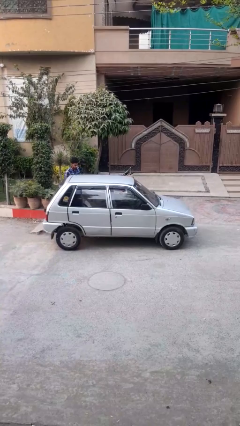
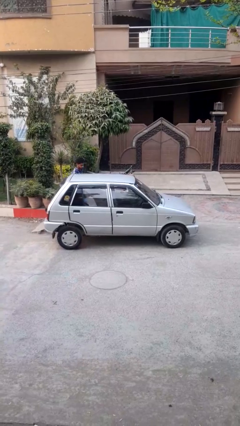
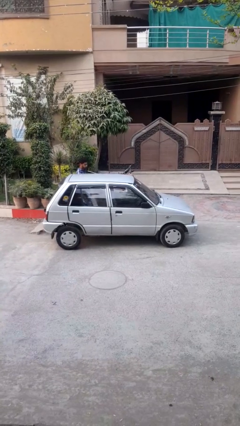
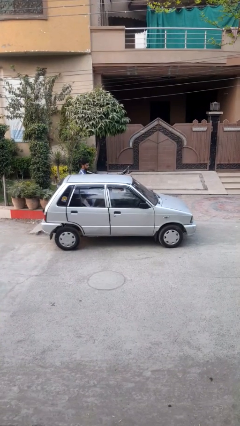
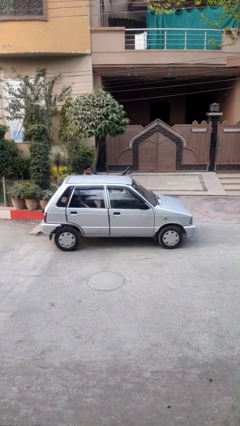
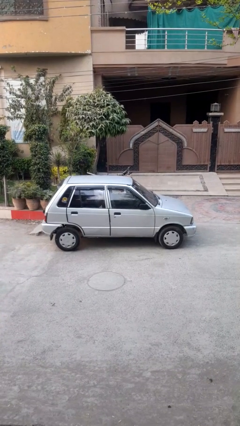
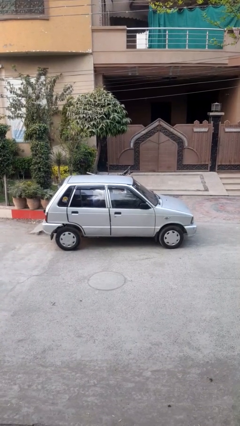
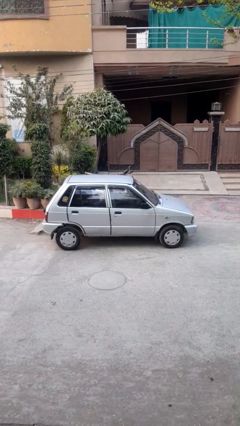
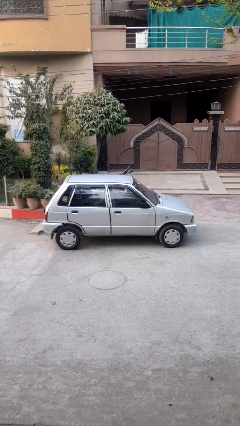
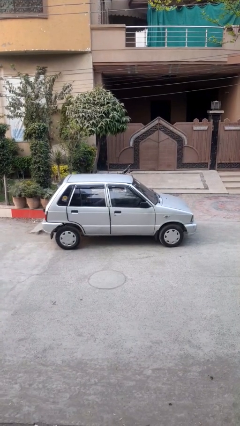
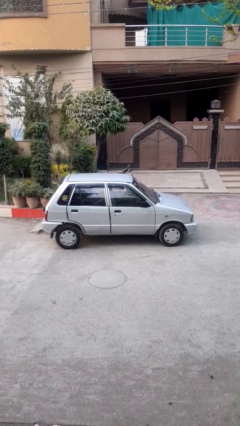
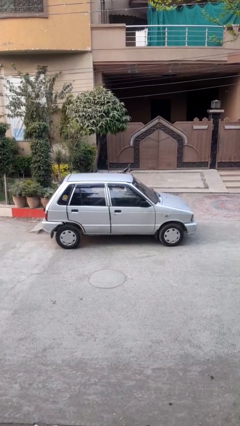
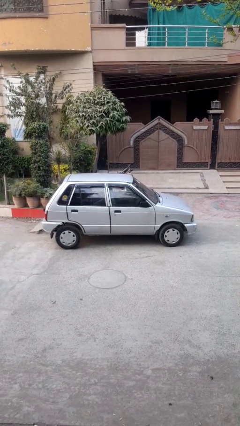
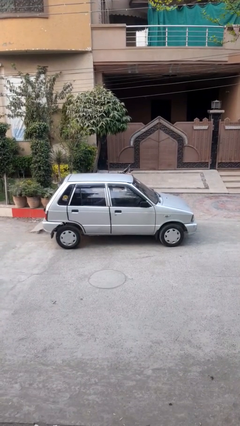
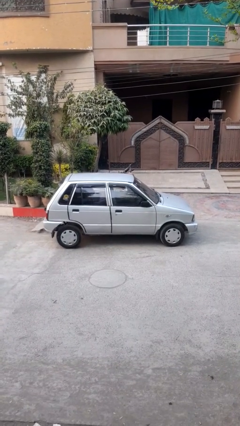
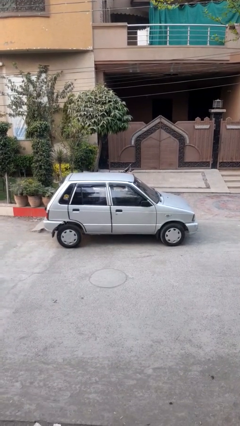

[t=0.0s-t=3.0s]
car picks up person

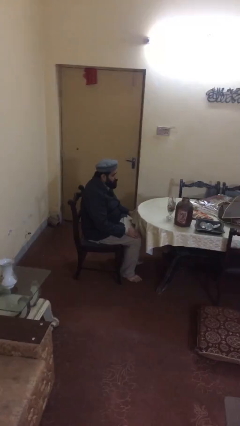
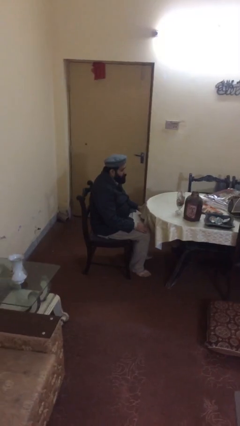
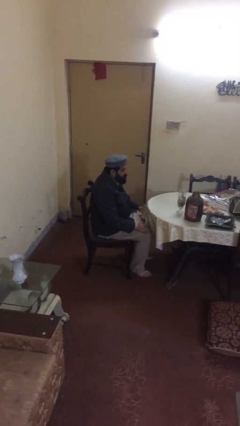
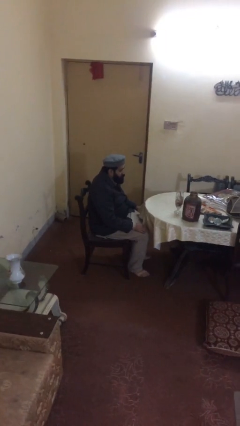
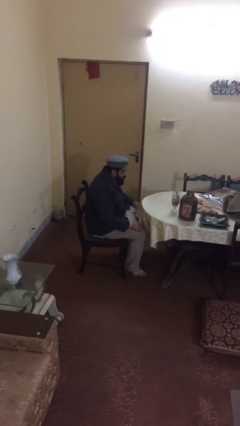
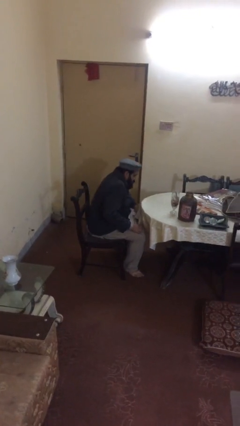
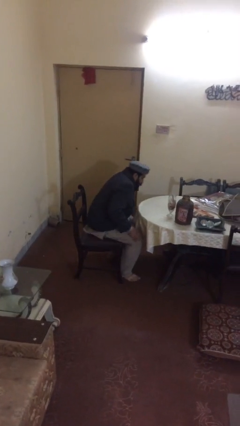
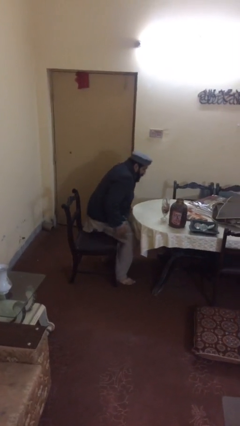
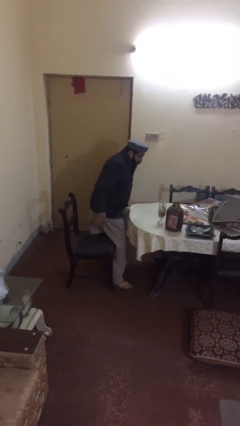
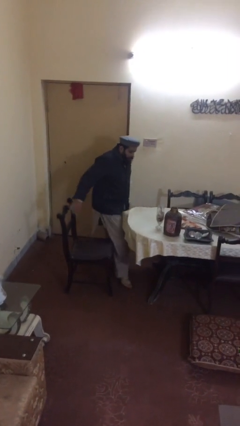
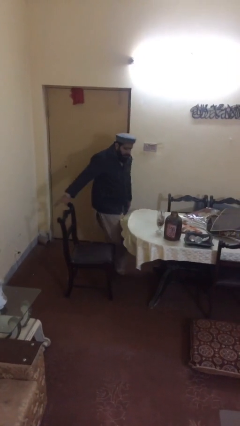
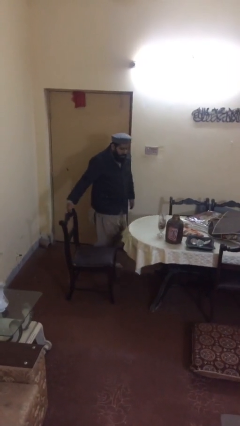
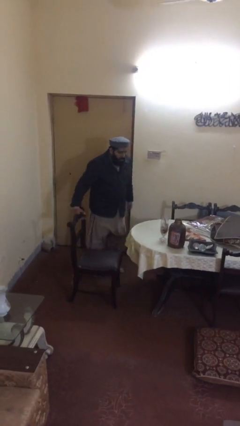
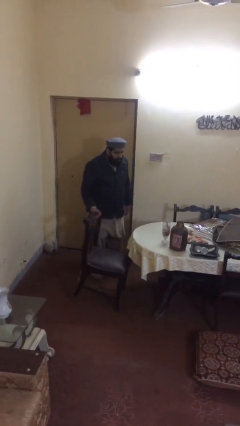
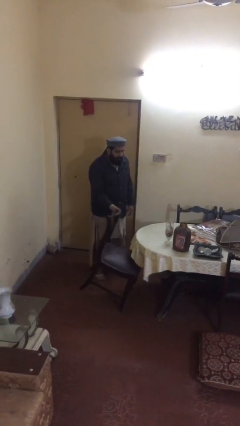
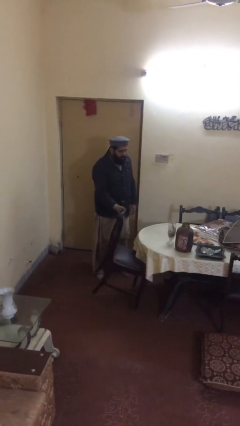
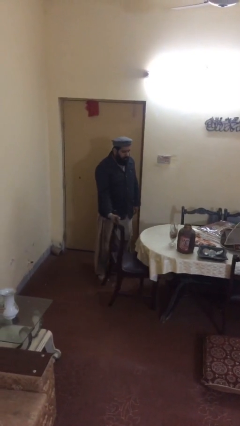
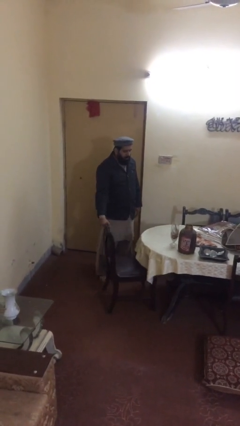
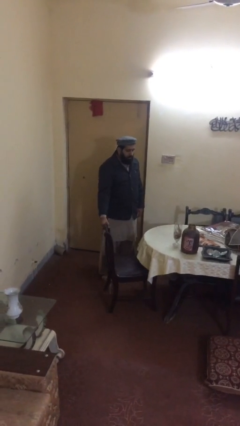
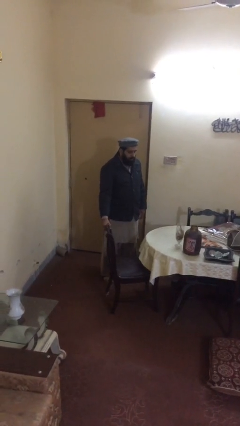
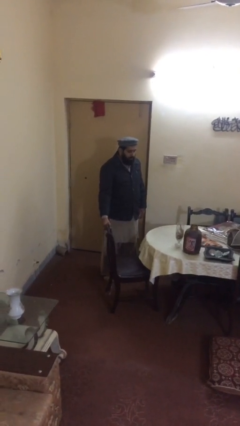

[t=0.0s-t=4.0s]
person stands up

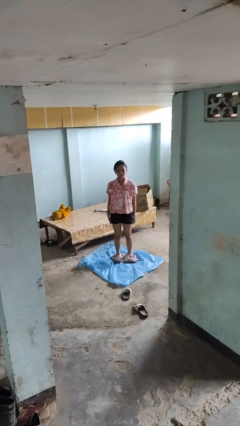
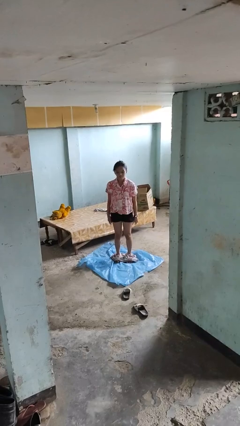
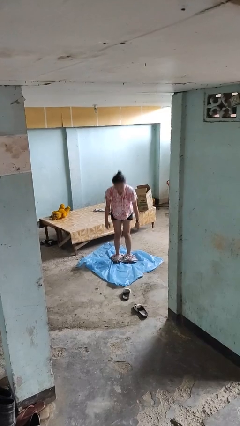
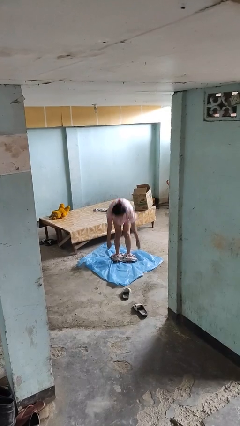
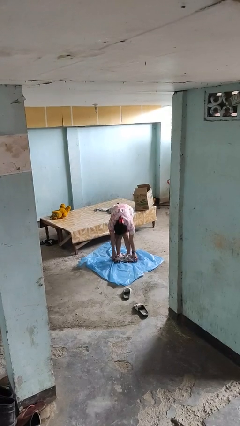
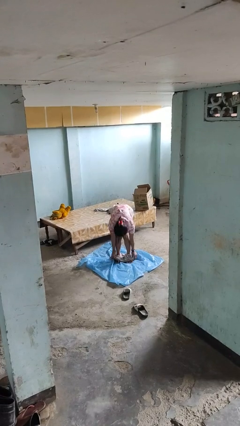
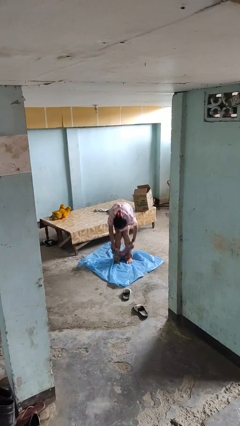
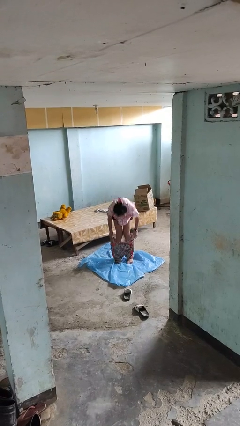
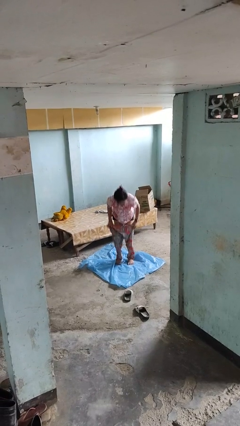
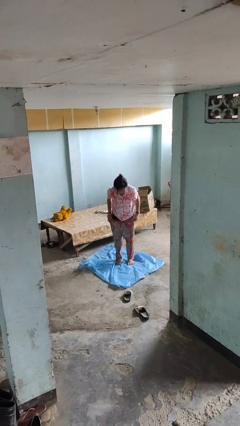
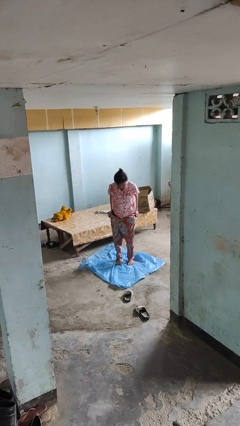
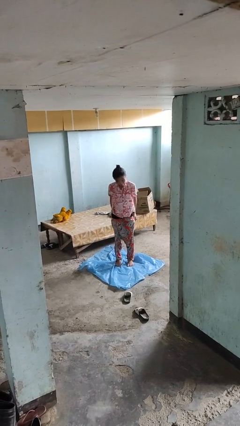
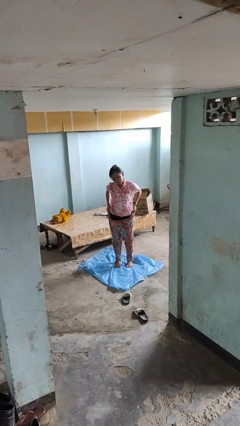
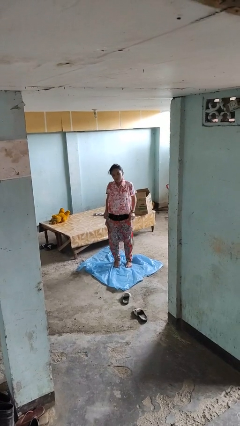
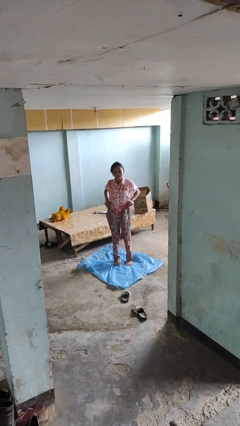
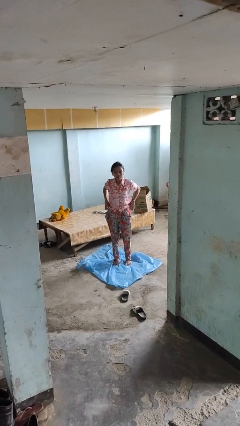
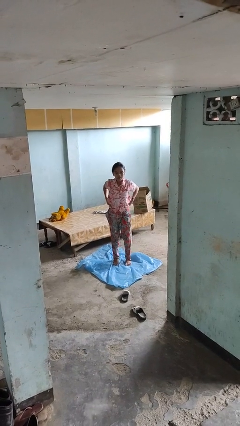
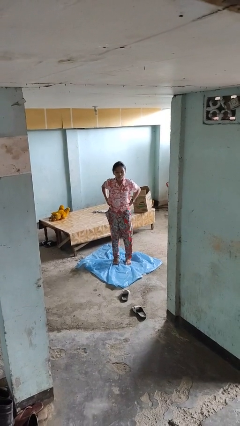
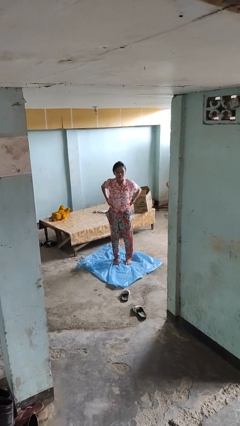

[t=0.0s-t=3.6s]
person puts on pants

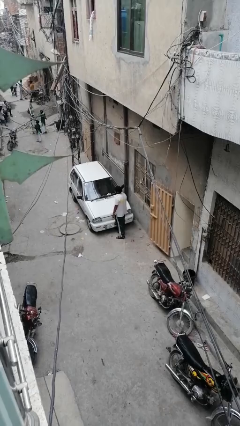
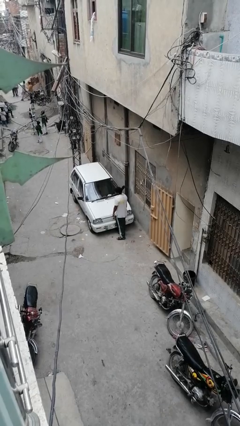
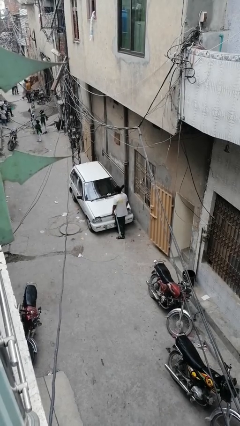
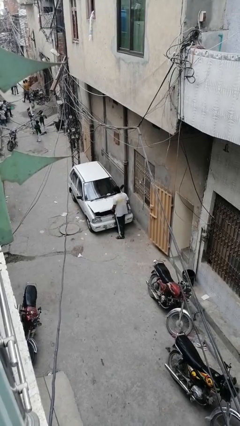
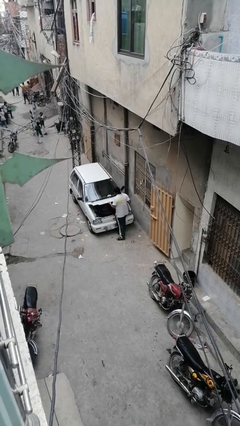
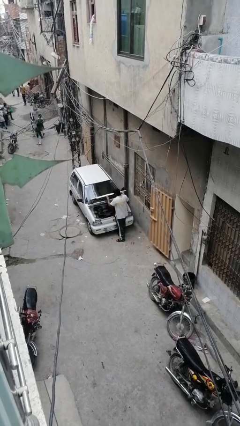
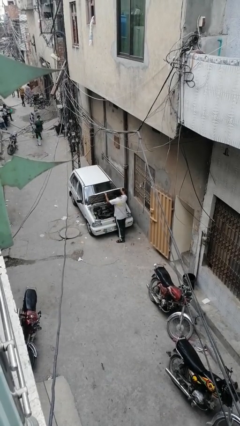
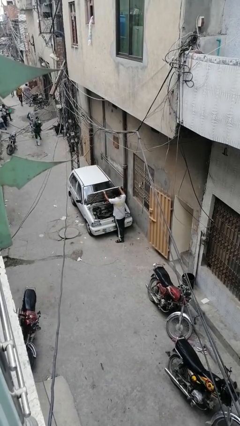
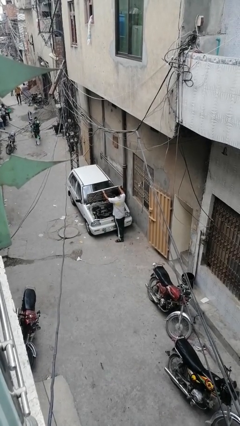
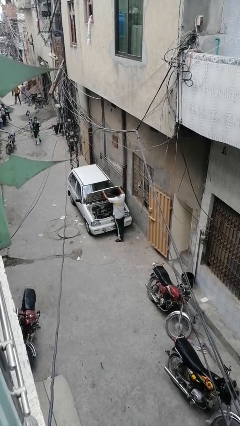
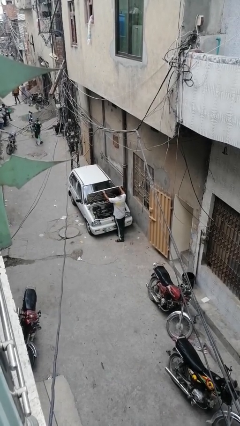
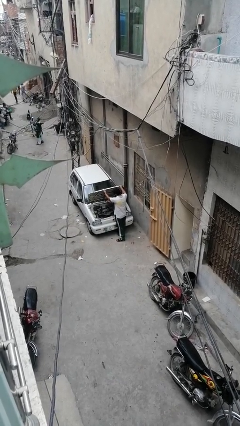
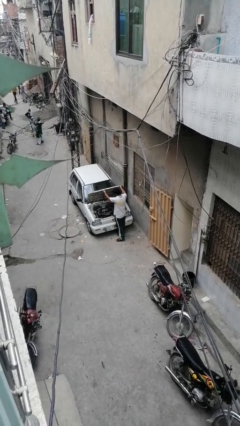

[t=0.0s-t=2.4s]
person opens car hood

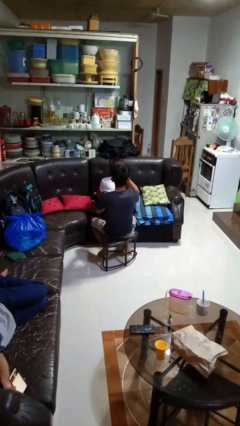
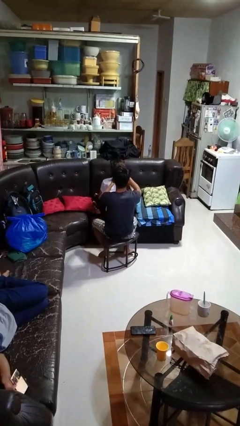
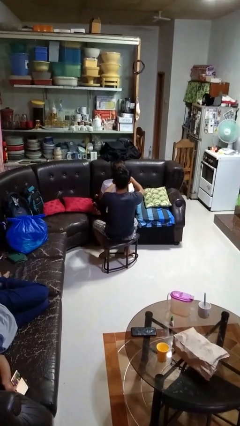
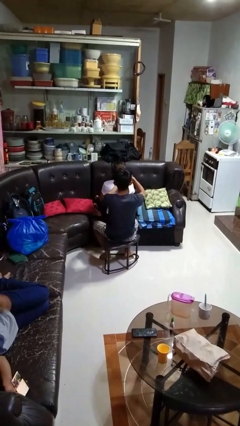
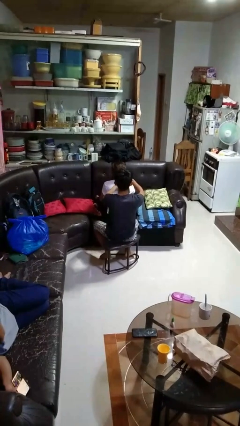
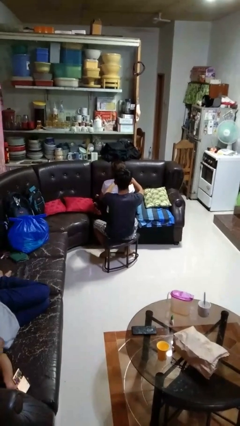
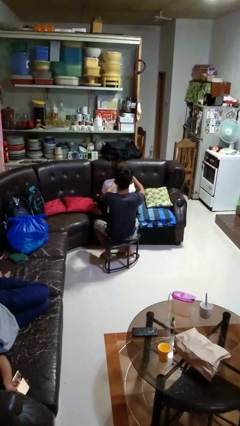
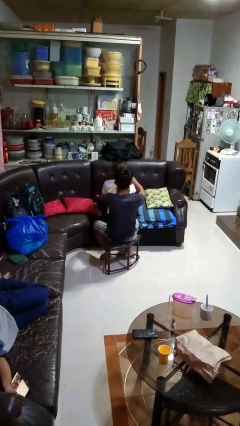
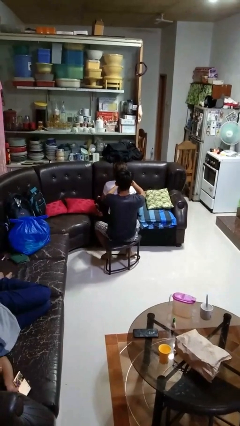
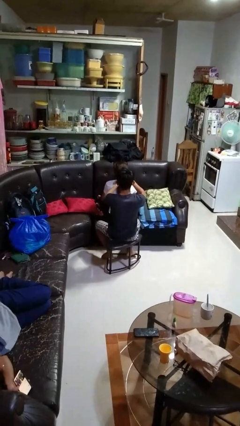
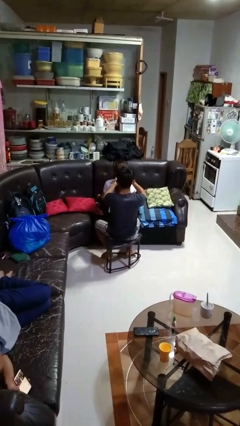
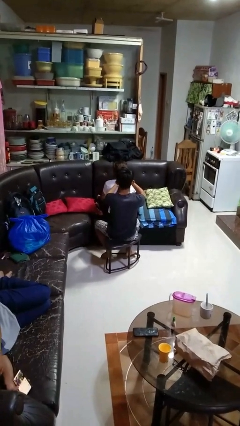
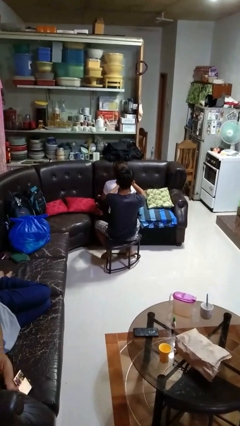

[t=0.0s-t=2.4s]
person braids hair of person

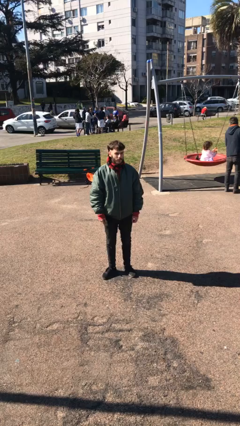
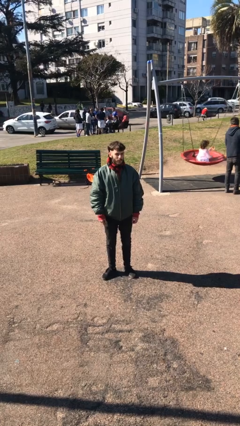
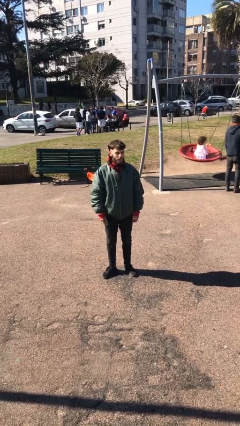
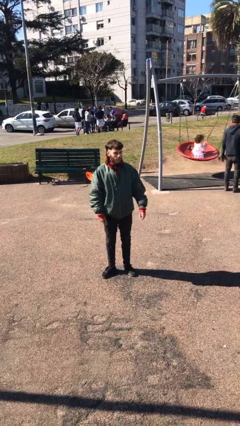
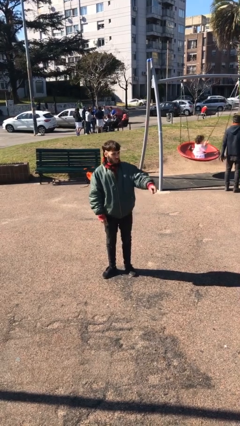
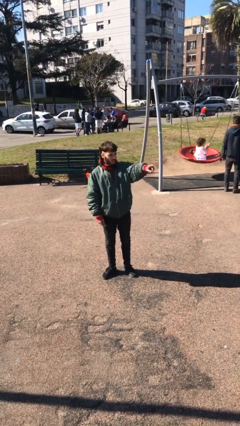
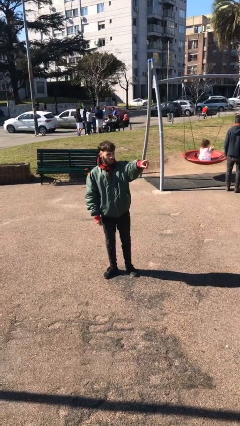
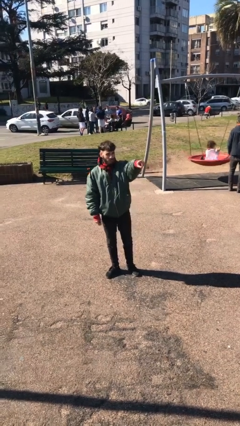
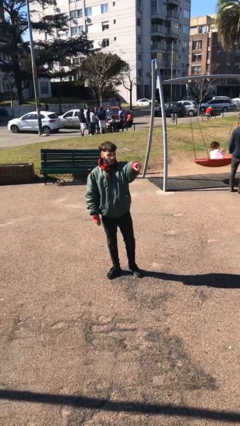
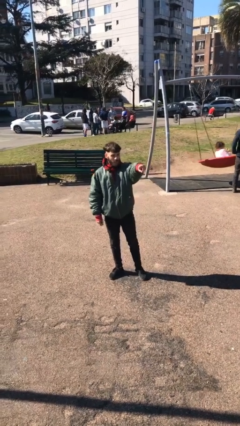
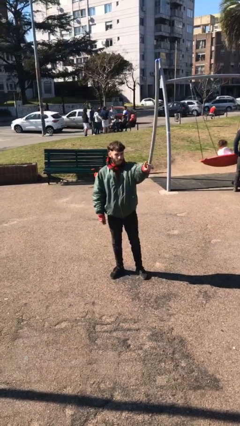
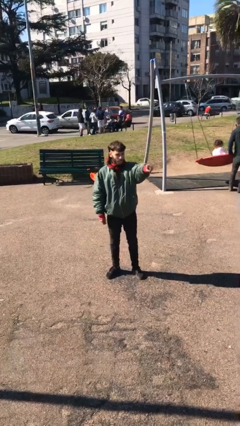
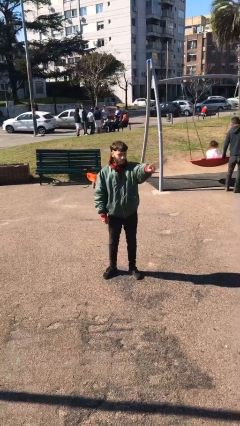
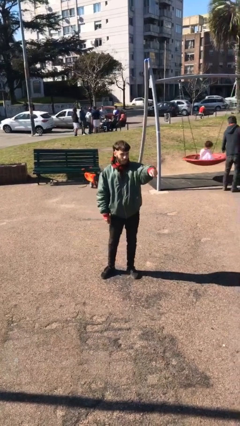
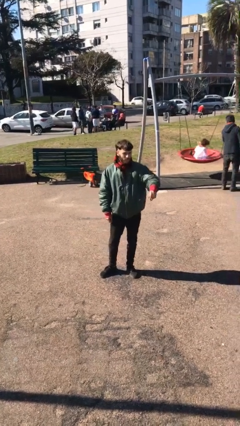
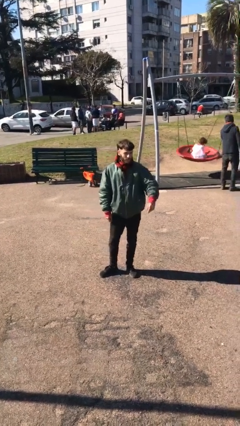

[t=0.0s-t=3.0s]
person points at person
